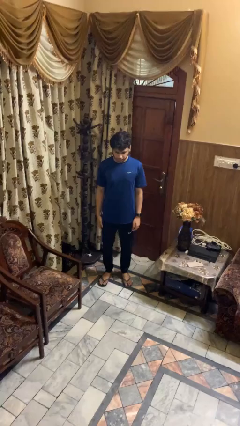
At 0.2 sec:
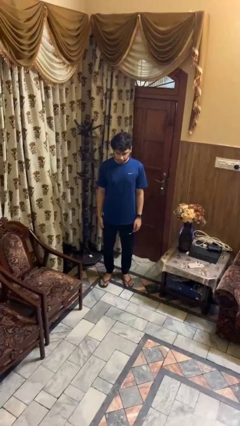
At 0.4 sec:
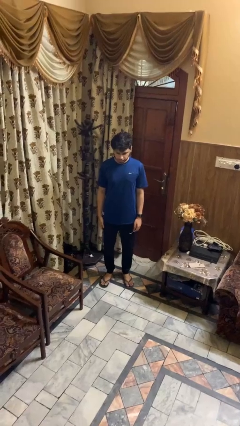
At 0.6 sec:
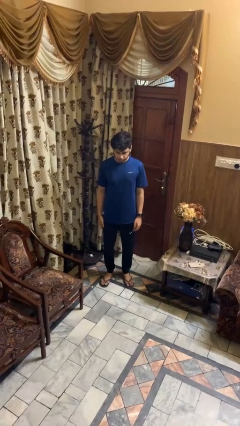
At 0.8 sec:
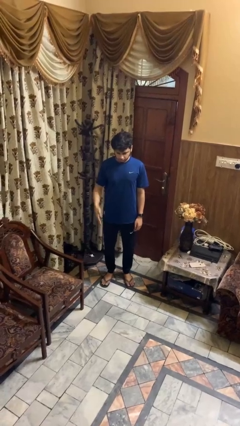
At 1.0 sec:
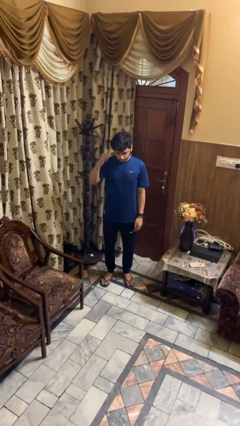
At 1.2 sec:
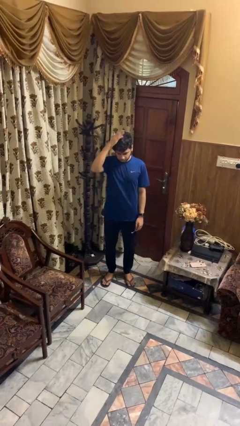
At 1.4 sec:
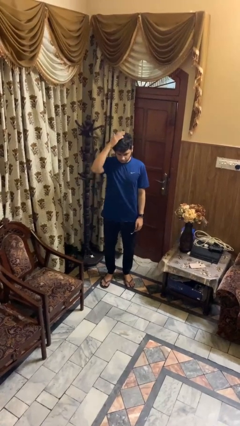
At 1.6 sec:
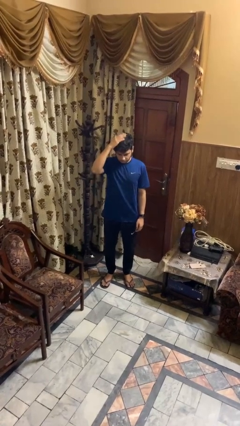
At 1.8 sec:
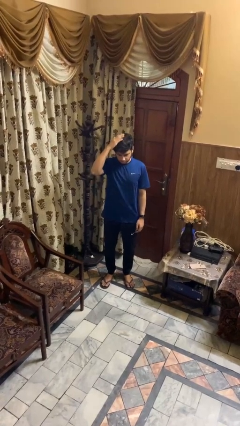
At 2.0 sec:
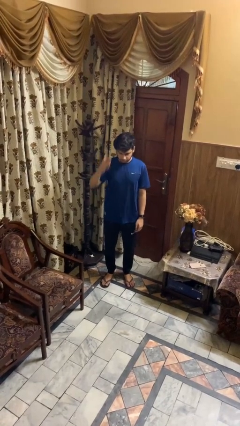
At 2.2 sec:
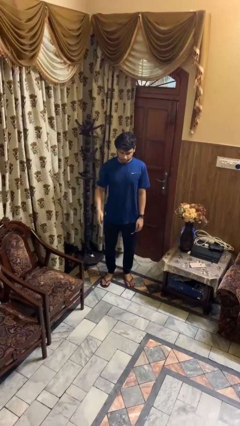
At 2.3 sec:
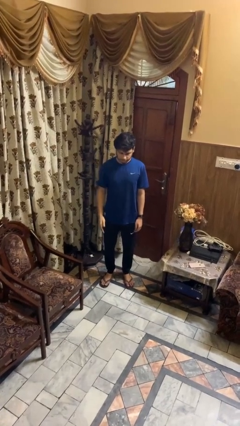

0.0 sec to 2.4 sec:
person pats head

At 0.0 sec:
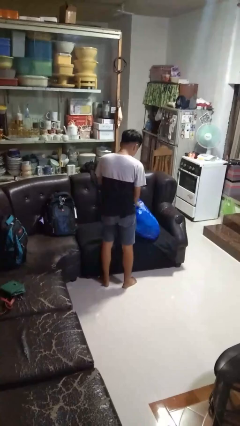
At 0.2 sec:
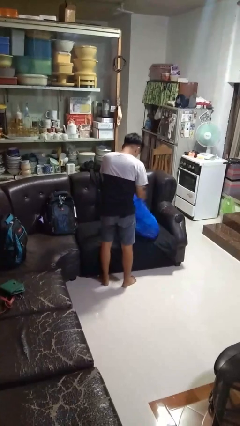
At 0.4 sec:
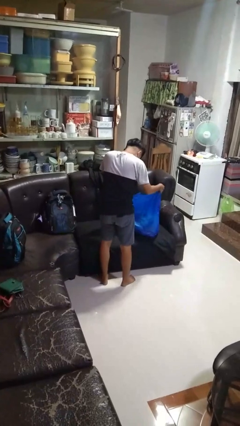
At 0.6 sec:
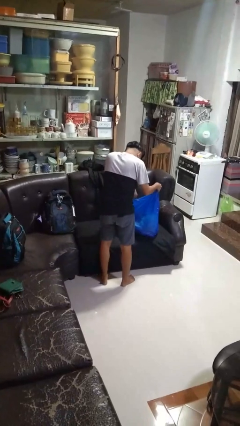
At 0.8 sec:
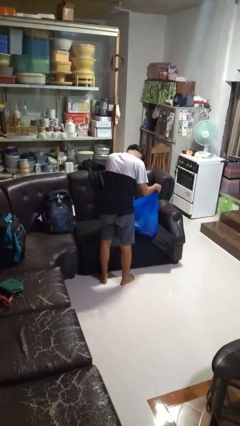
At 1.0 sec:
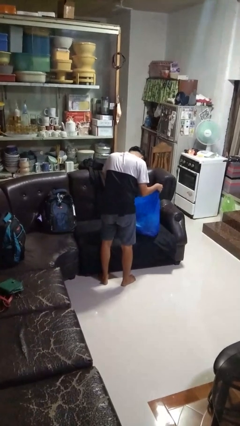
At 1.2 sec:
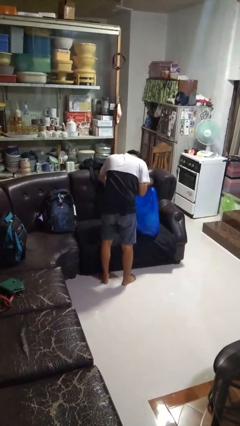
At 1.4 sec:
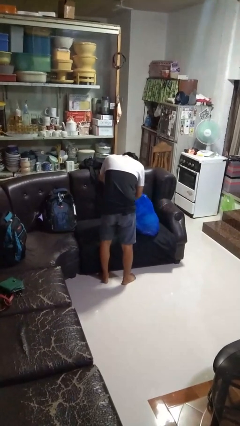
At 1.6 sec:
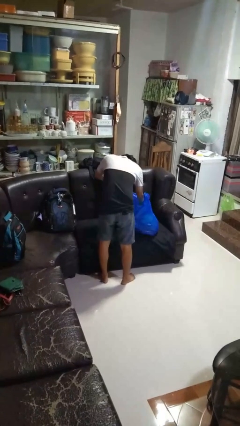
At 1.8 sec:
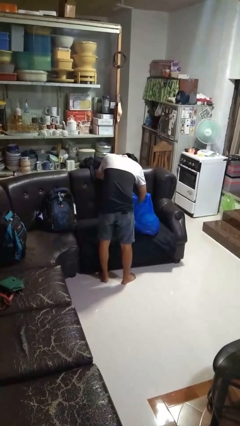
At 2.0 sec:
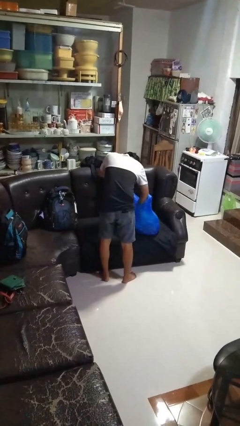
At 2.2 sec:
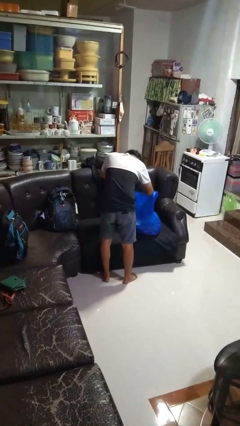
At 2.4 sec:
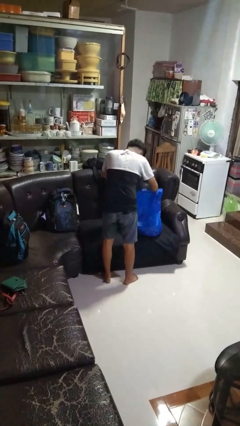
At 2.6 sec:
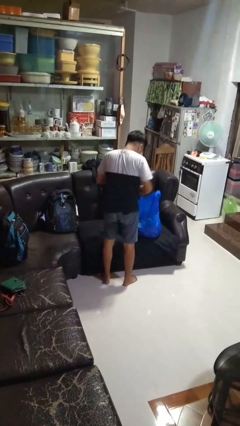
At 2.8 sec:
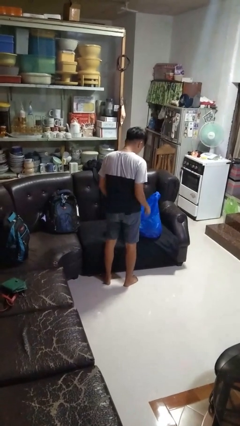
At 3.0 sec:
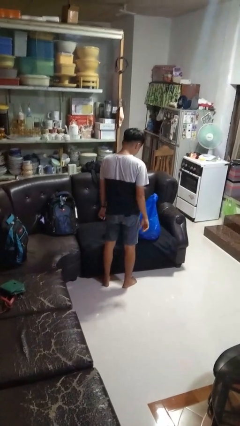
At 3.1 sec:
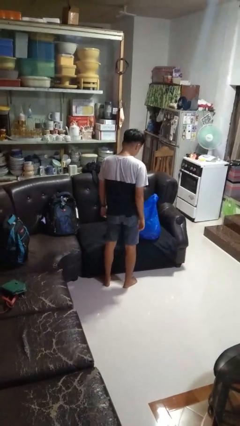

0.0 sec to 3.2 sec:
person searches in bag

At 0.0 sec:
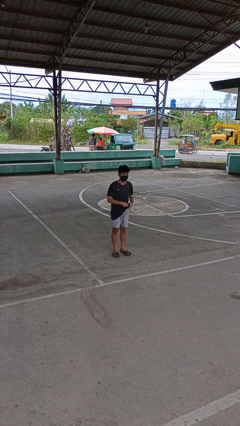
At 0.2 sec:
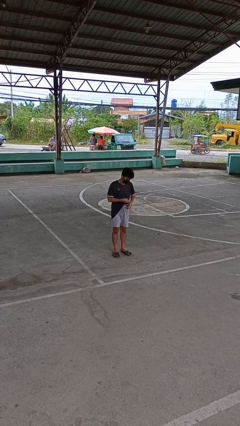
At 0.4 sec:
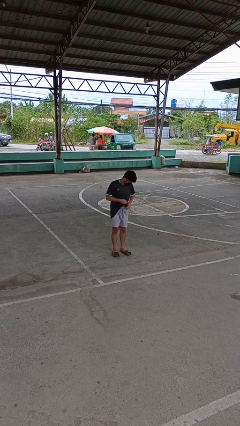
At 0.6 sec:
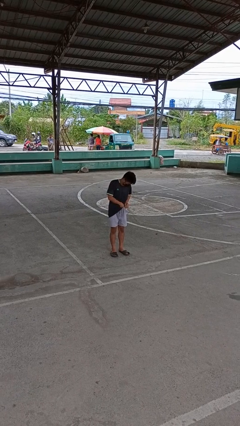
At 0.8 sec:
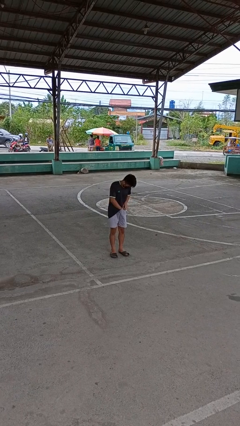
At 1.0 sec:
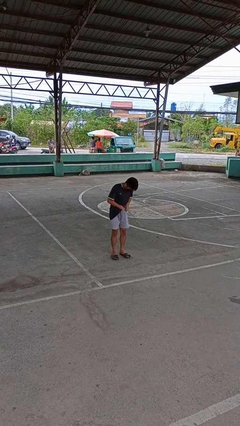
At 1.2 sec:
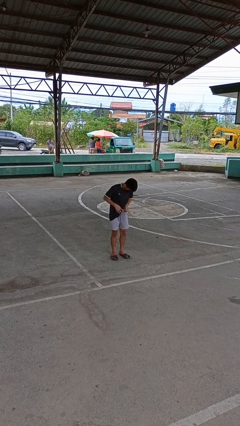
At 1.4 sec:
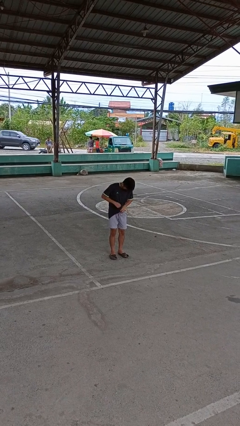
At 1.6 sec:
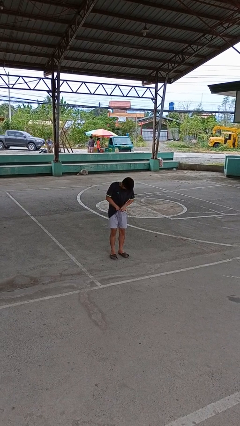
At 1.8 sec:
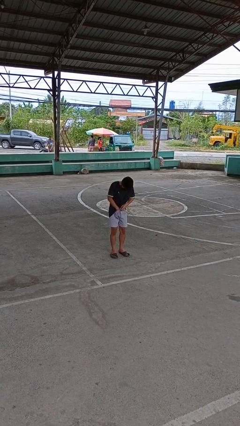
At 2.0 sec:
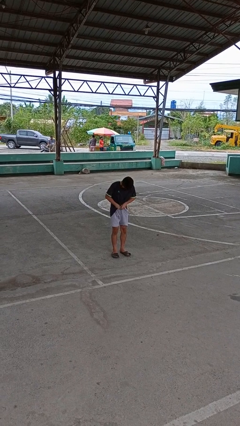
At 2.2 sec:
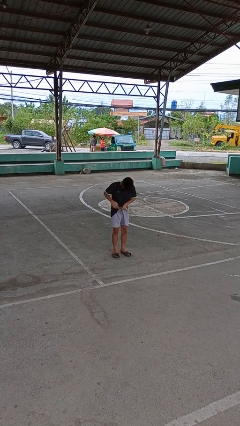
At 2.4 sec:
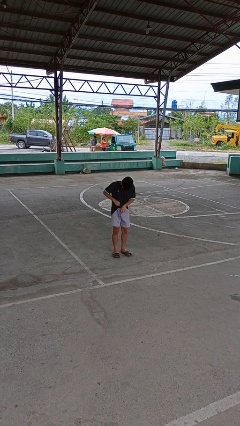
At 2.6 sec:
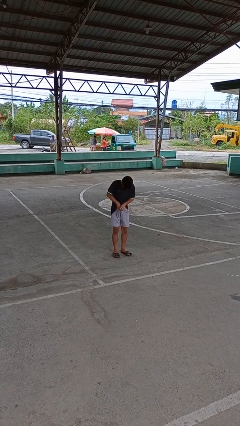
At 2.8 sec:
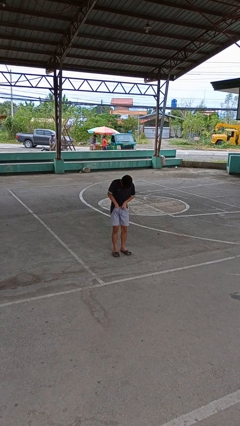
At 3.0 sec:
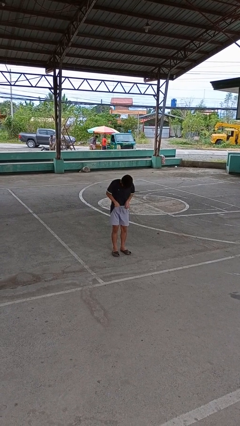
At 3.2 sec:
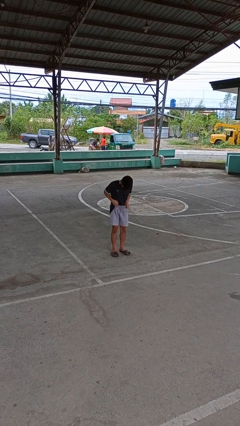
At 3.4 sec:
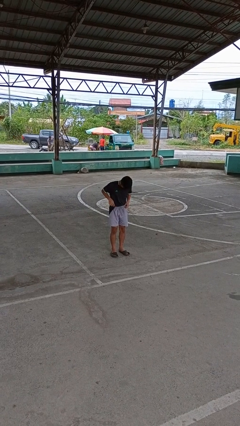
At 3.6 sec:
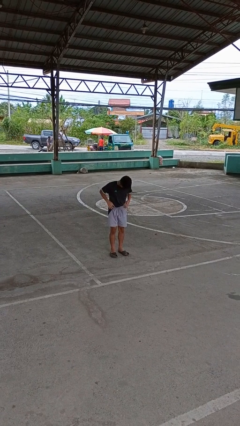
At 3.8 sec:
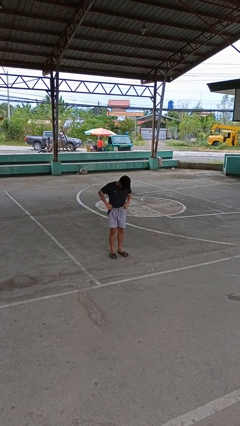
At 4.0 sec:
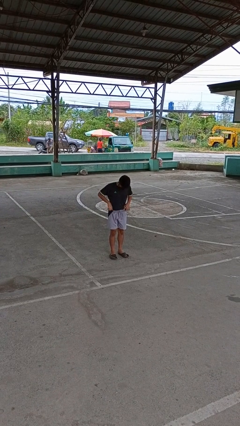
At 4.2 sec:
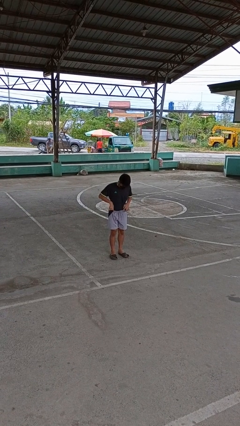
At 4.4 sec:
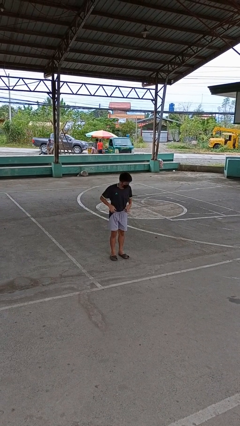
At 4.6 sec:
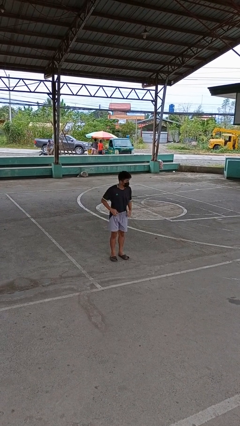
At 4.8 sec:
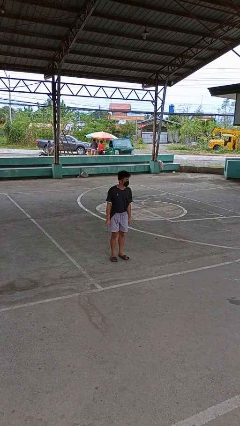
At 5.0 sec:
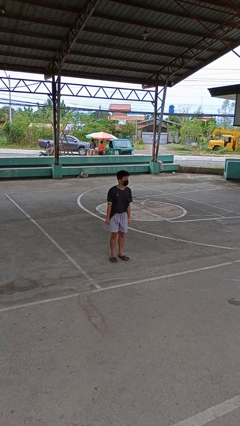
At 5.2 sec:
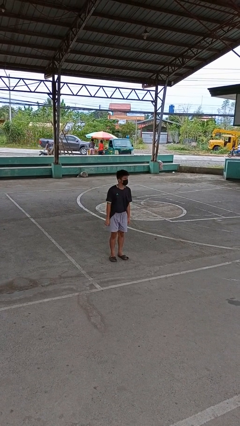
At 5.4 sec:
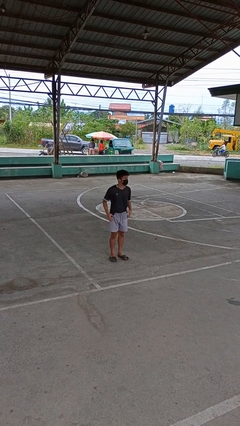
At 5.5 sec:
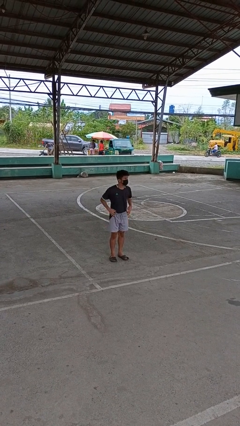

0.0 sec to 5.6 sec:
person tucks in shirt

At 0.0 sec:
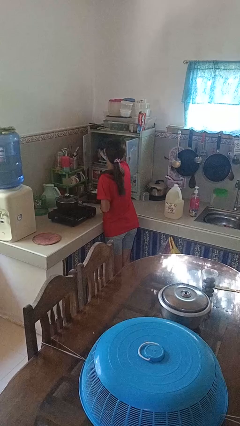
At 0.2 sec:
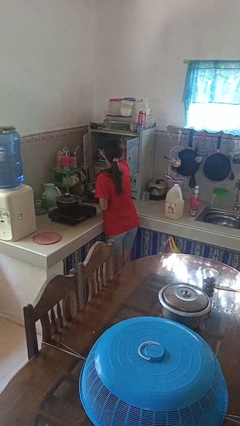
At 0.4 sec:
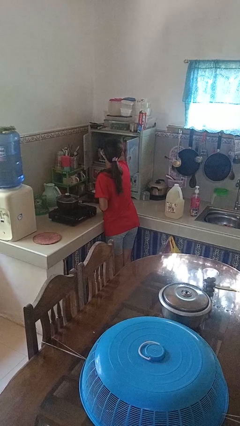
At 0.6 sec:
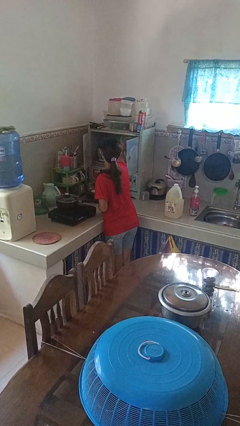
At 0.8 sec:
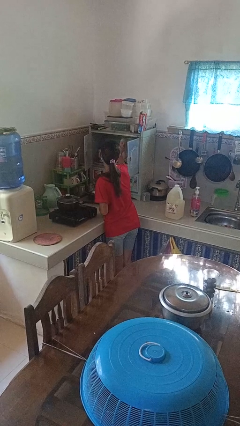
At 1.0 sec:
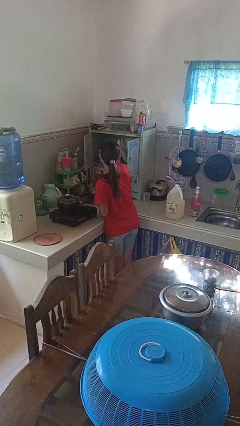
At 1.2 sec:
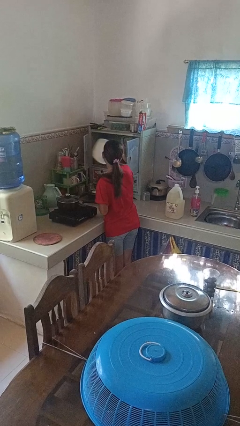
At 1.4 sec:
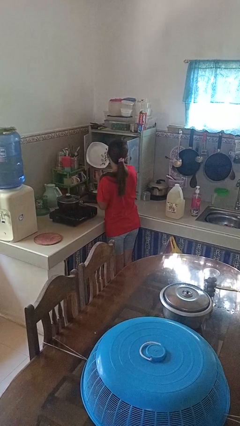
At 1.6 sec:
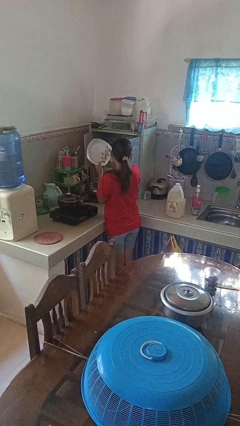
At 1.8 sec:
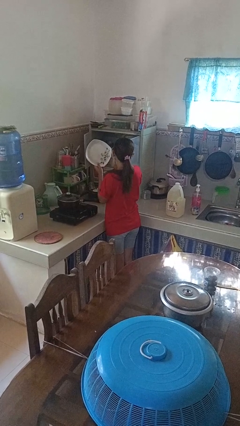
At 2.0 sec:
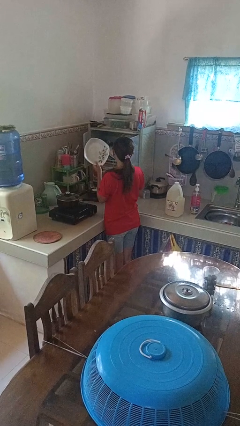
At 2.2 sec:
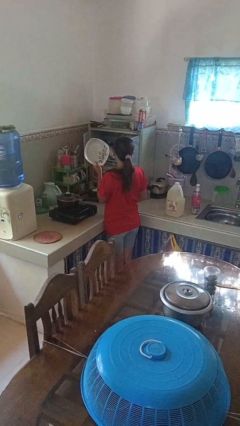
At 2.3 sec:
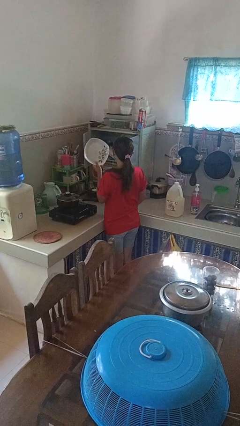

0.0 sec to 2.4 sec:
person takes object from cabinet

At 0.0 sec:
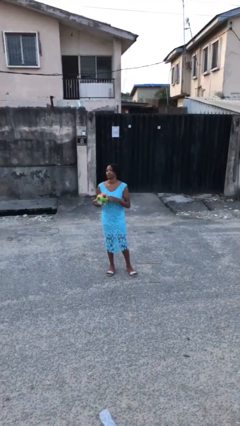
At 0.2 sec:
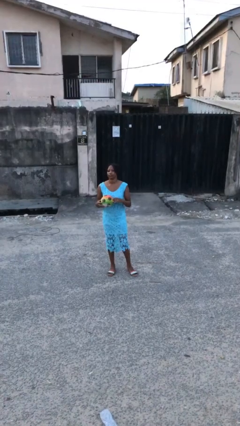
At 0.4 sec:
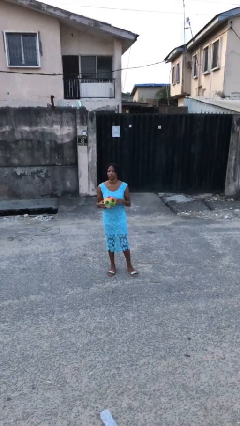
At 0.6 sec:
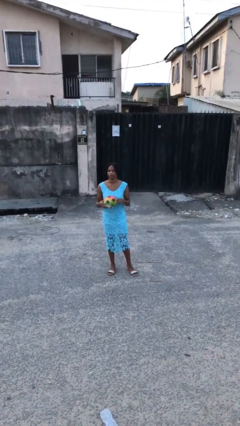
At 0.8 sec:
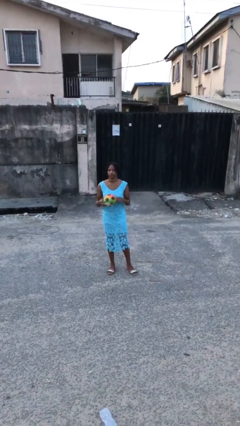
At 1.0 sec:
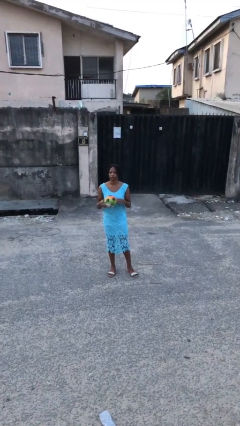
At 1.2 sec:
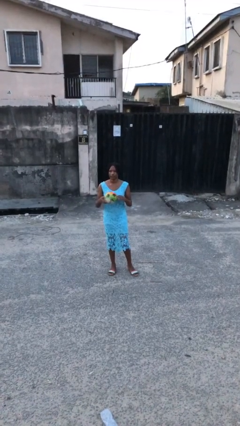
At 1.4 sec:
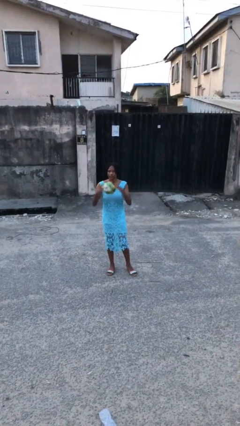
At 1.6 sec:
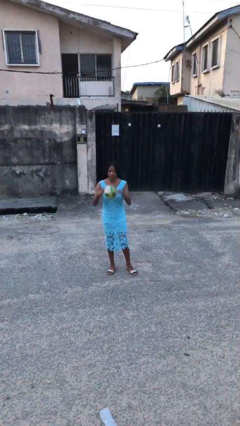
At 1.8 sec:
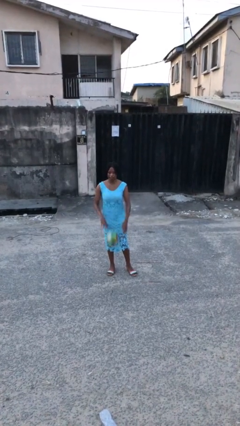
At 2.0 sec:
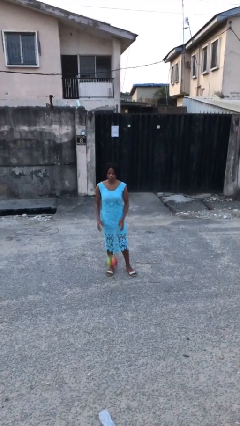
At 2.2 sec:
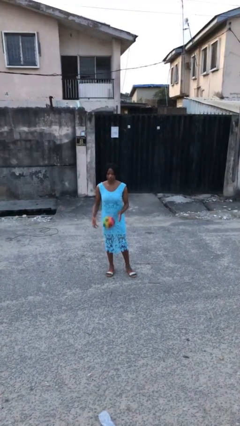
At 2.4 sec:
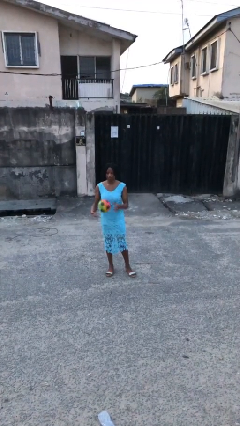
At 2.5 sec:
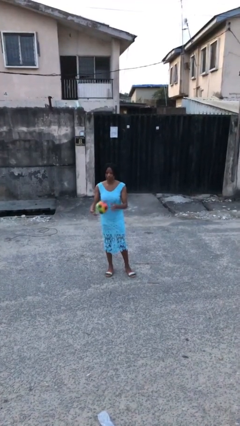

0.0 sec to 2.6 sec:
person bounces ball on floor

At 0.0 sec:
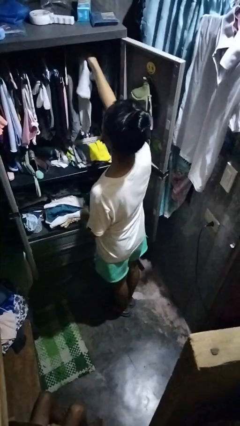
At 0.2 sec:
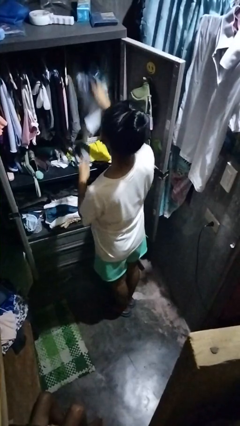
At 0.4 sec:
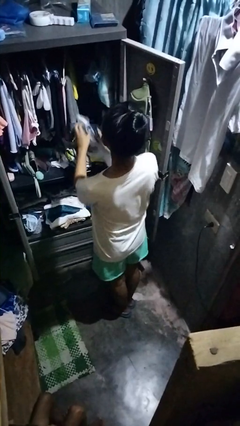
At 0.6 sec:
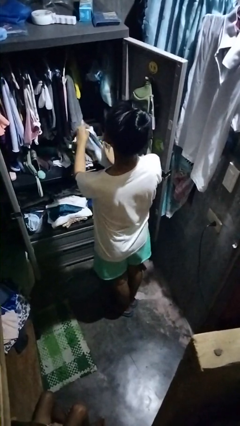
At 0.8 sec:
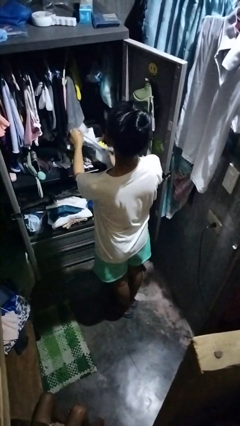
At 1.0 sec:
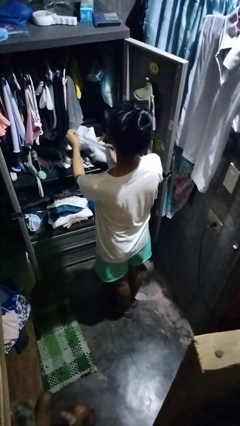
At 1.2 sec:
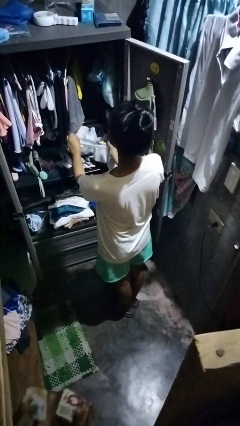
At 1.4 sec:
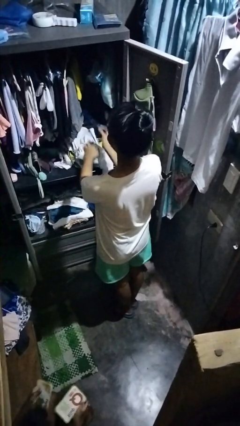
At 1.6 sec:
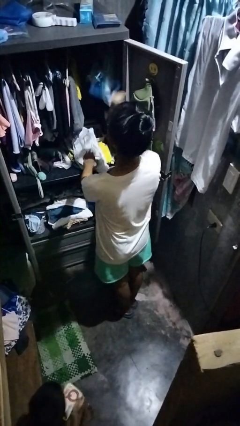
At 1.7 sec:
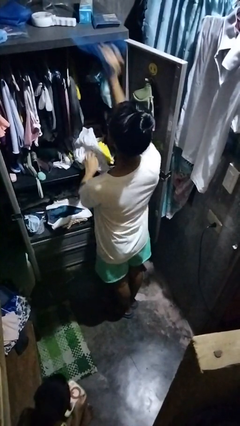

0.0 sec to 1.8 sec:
person takes clothes from closet
